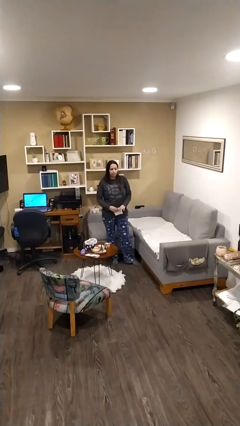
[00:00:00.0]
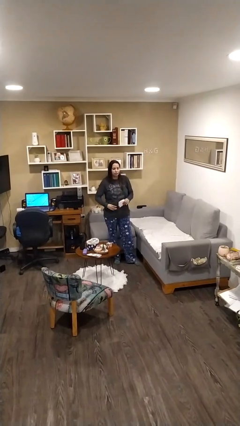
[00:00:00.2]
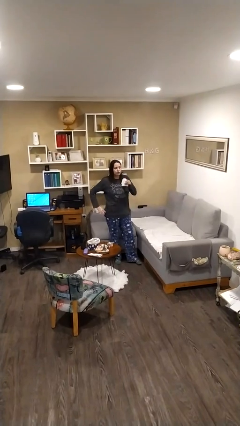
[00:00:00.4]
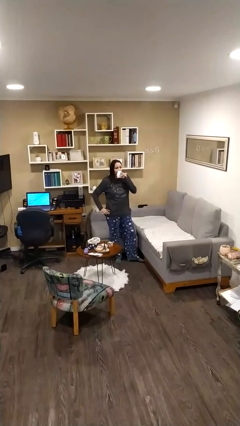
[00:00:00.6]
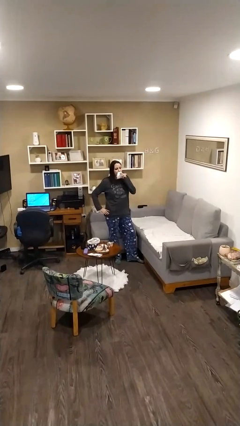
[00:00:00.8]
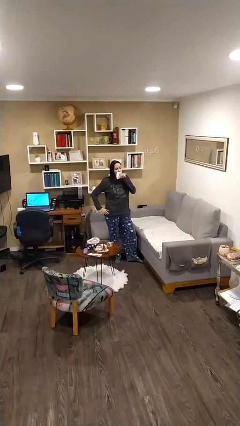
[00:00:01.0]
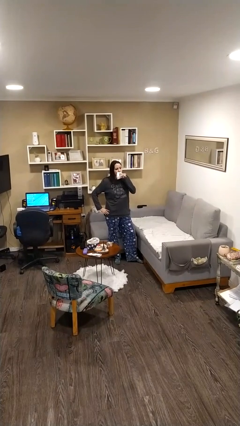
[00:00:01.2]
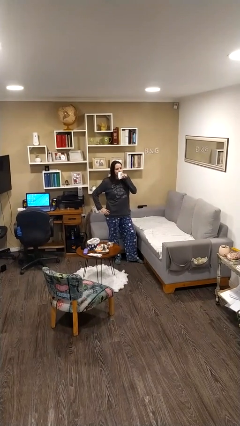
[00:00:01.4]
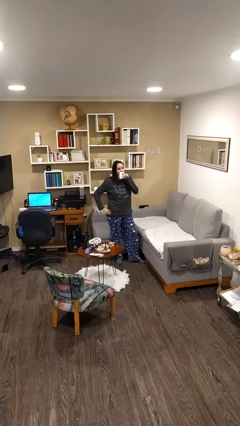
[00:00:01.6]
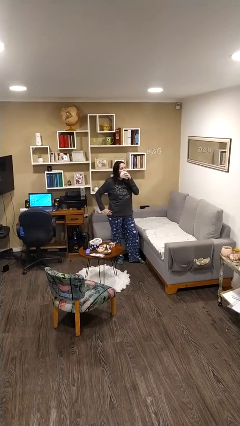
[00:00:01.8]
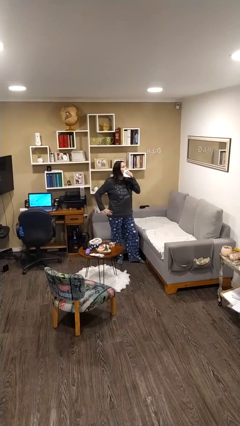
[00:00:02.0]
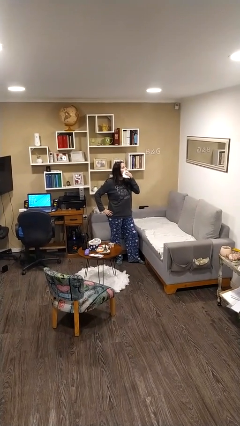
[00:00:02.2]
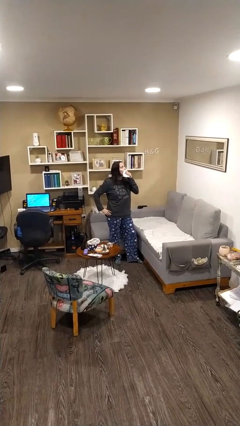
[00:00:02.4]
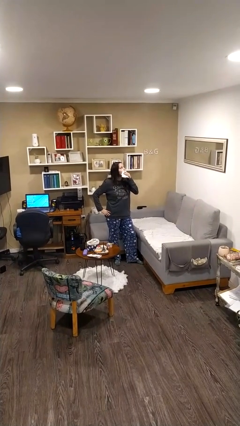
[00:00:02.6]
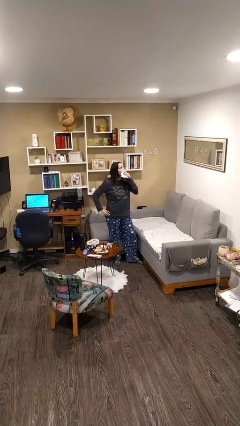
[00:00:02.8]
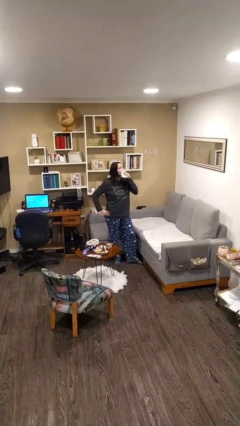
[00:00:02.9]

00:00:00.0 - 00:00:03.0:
person wipes mouth with napkin

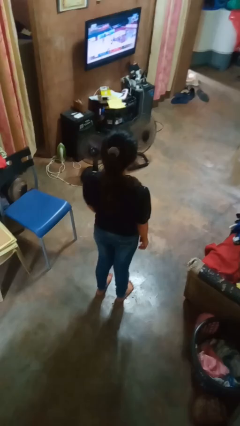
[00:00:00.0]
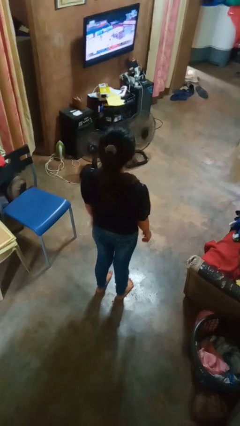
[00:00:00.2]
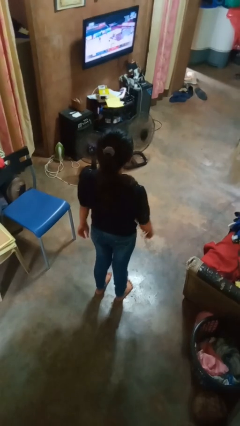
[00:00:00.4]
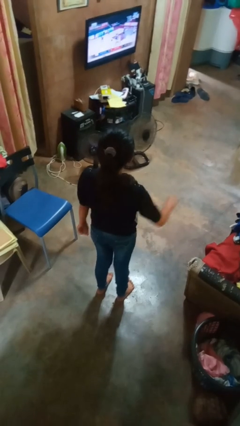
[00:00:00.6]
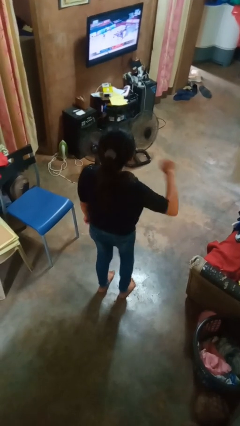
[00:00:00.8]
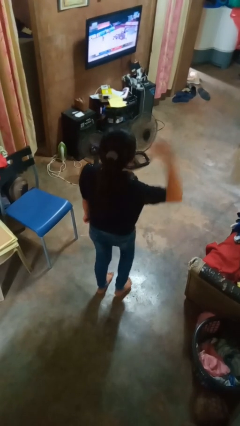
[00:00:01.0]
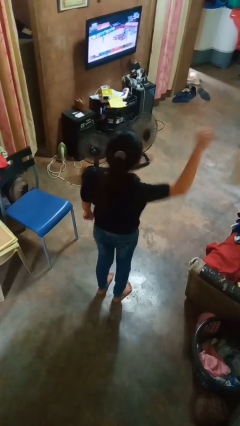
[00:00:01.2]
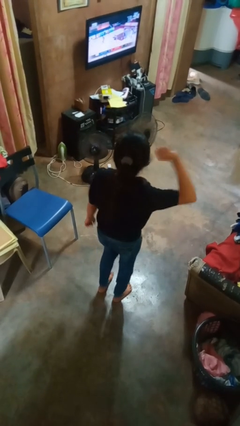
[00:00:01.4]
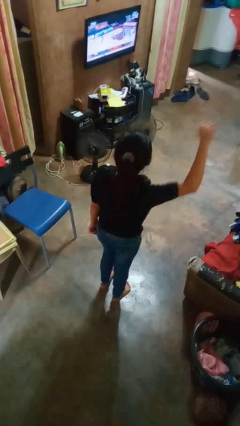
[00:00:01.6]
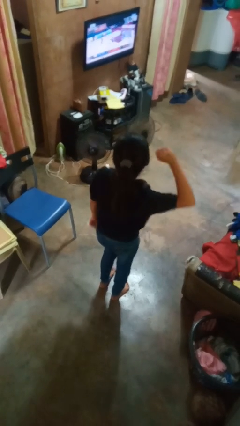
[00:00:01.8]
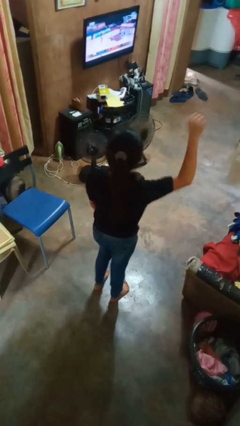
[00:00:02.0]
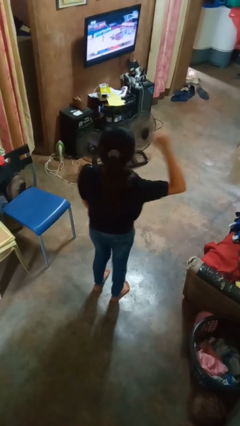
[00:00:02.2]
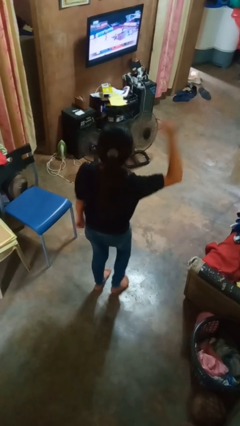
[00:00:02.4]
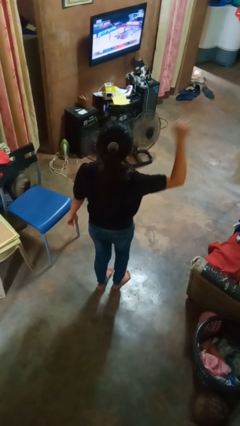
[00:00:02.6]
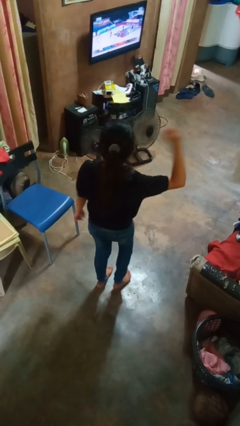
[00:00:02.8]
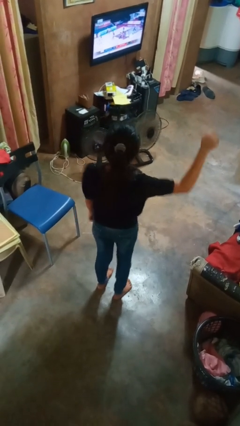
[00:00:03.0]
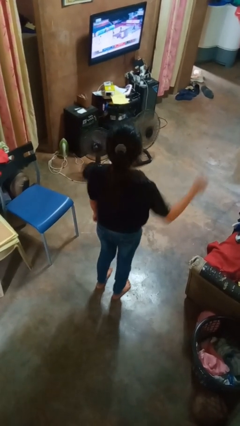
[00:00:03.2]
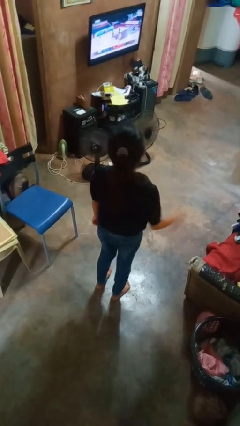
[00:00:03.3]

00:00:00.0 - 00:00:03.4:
person dances in place

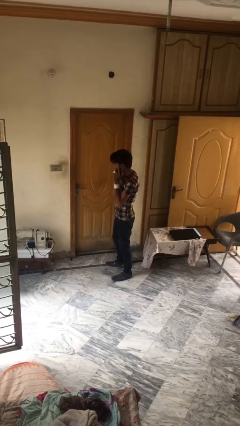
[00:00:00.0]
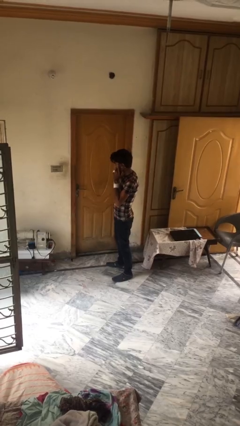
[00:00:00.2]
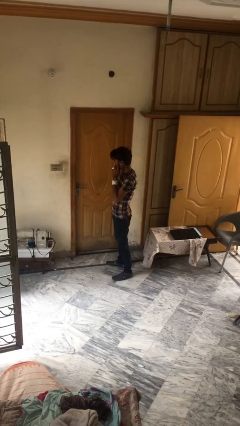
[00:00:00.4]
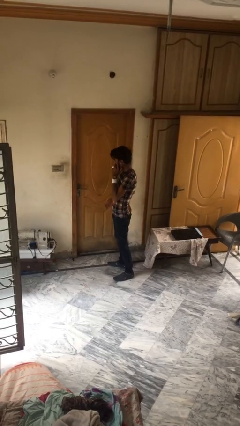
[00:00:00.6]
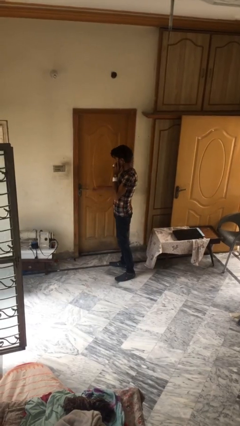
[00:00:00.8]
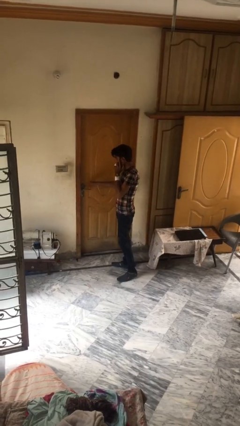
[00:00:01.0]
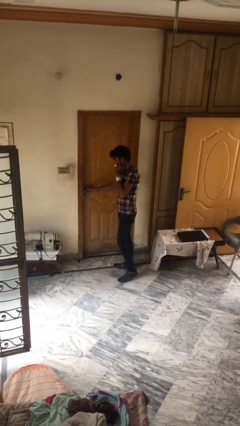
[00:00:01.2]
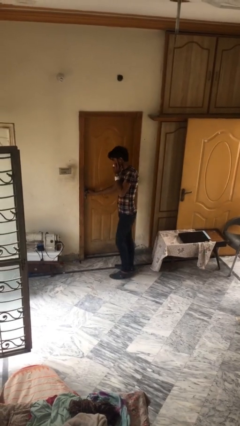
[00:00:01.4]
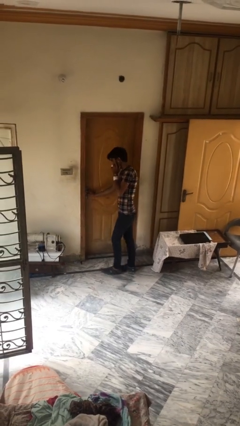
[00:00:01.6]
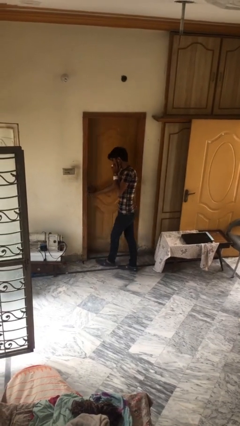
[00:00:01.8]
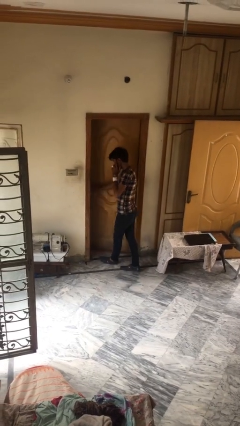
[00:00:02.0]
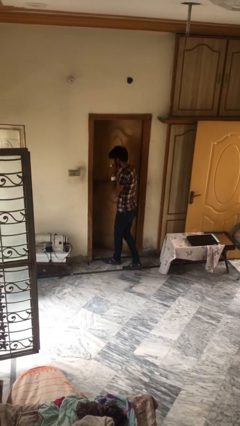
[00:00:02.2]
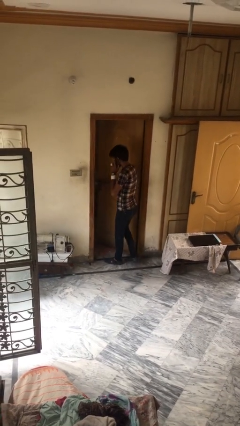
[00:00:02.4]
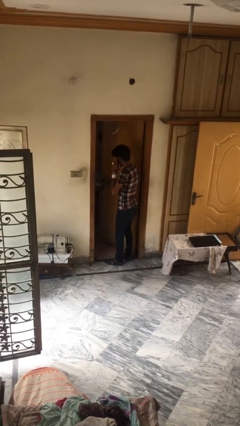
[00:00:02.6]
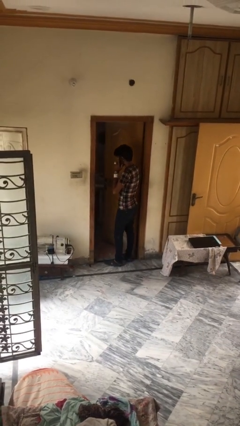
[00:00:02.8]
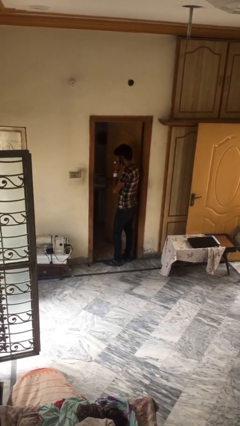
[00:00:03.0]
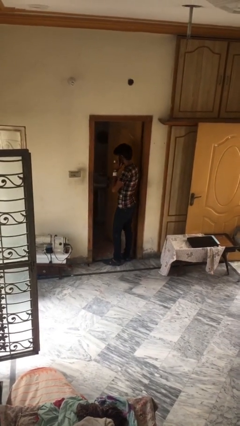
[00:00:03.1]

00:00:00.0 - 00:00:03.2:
person opens facility door

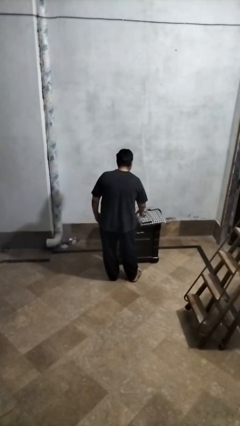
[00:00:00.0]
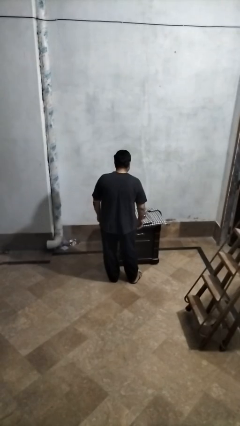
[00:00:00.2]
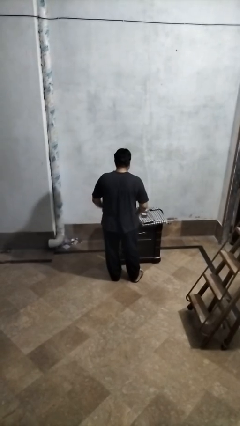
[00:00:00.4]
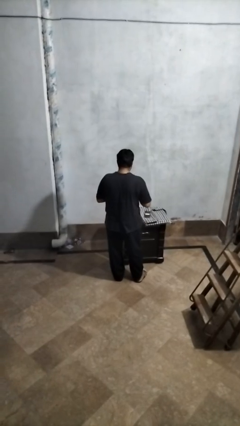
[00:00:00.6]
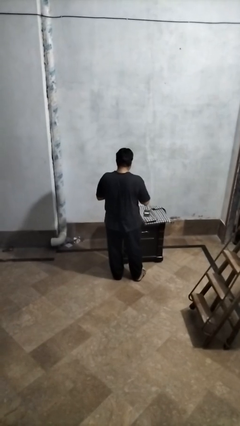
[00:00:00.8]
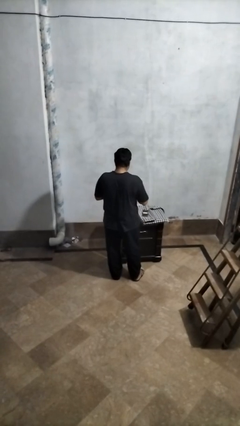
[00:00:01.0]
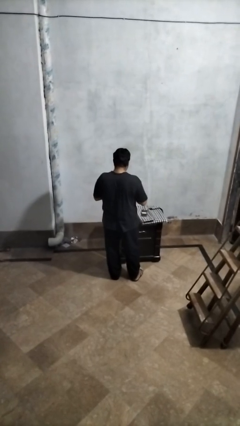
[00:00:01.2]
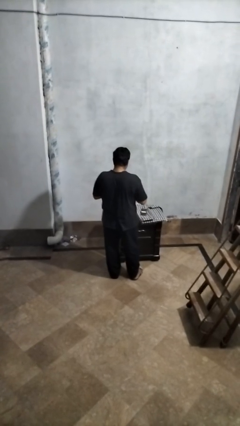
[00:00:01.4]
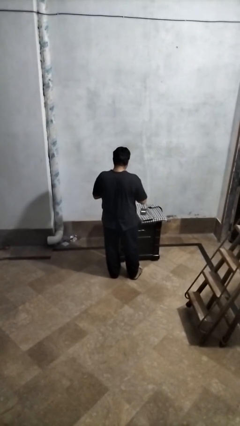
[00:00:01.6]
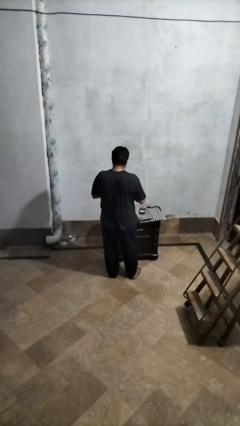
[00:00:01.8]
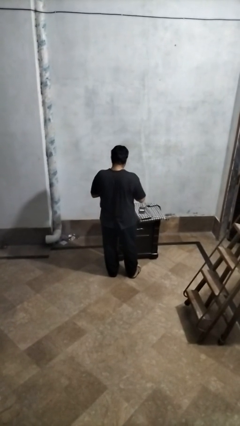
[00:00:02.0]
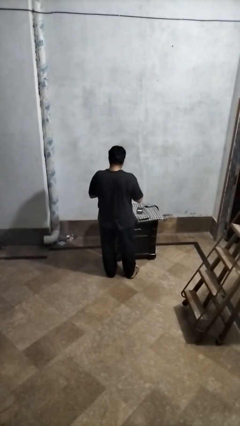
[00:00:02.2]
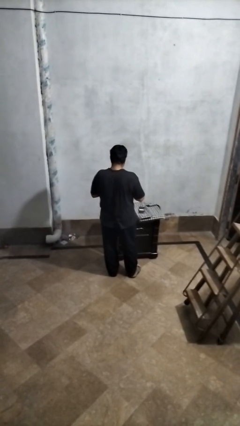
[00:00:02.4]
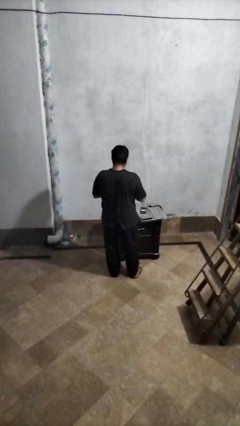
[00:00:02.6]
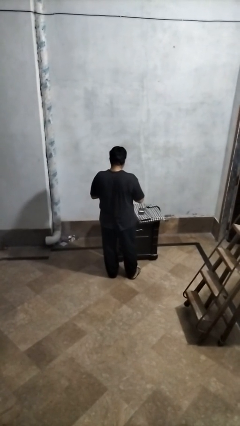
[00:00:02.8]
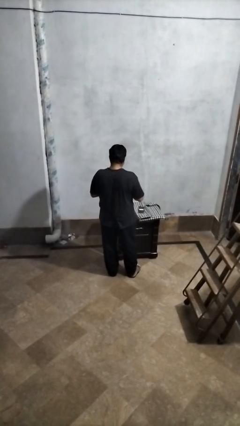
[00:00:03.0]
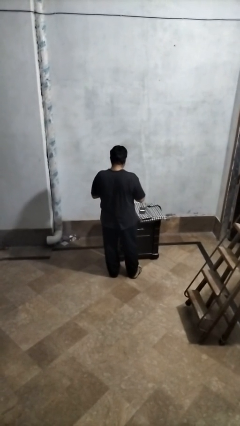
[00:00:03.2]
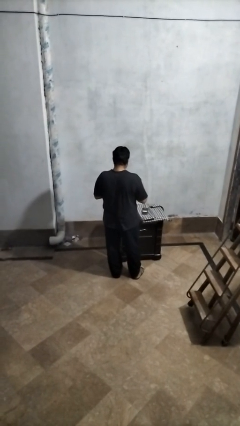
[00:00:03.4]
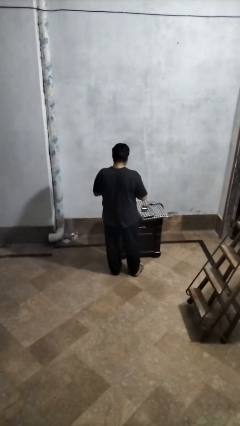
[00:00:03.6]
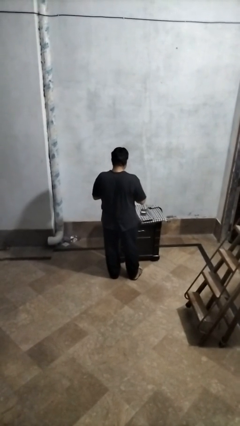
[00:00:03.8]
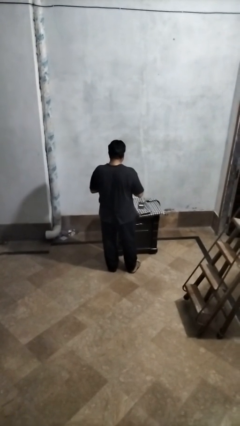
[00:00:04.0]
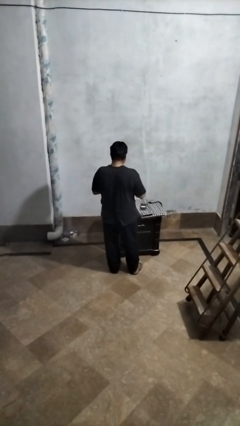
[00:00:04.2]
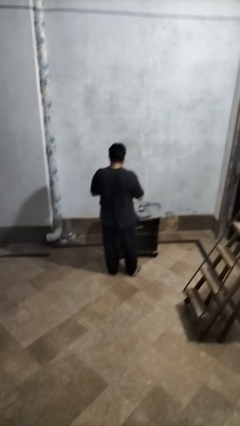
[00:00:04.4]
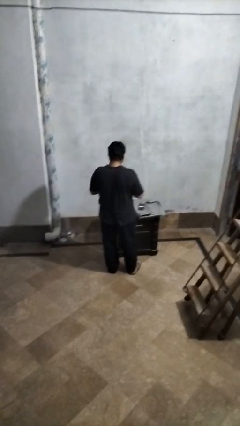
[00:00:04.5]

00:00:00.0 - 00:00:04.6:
person clips fingernails

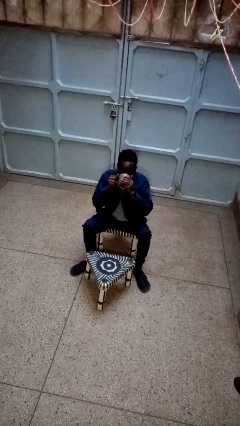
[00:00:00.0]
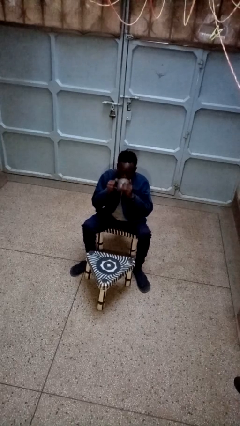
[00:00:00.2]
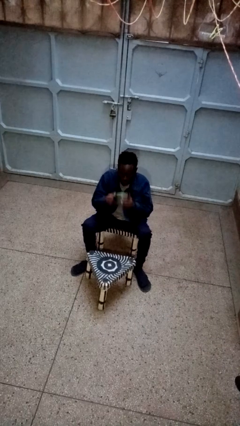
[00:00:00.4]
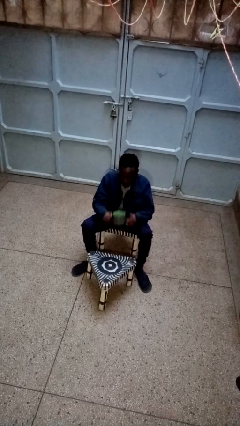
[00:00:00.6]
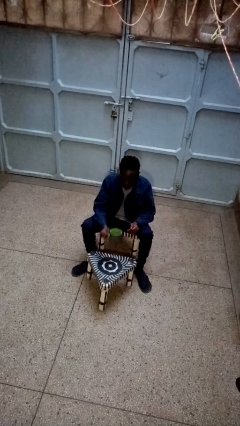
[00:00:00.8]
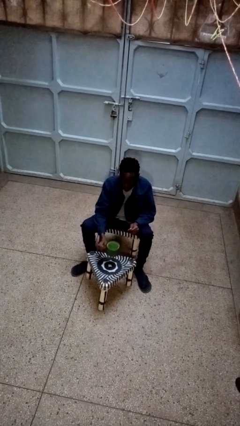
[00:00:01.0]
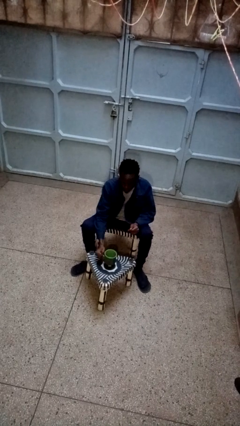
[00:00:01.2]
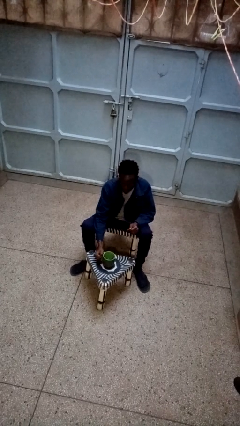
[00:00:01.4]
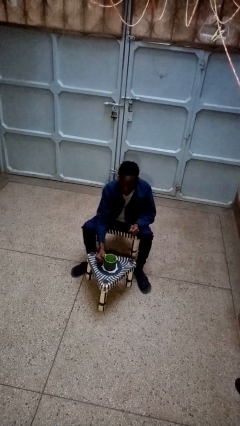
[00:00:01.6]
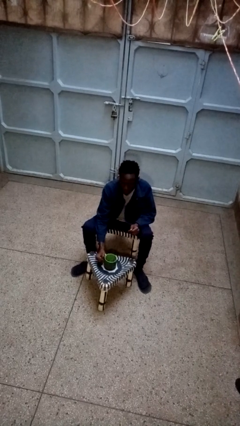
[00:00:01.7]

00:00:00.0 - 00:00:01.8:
person puts down object on table

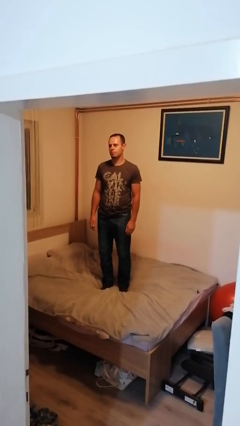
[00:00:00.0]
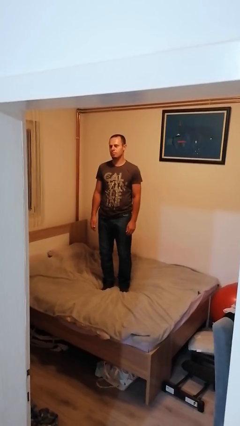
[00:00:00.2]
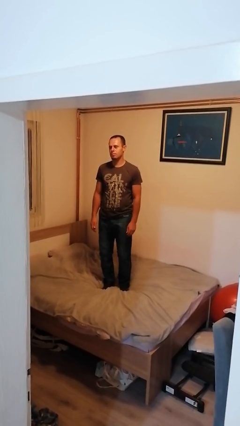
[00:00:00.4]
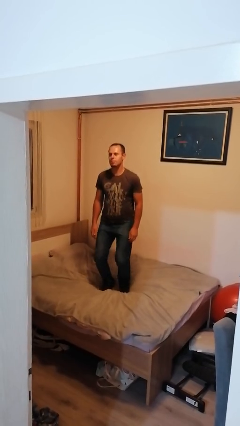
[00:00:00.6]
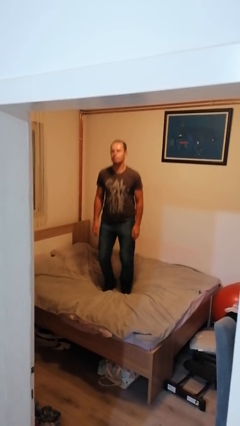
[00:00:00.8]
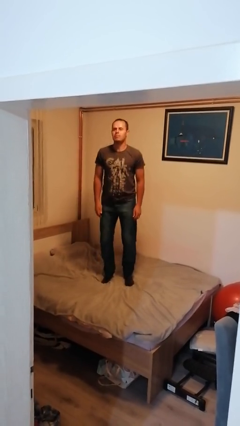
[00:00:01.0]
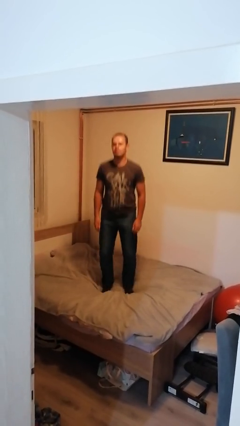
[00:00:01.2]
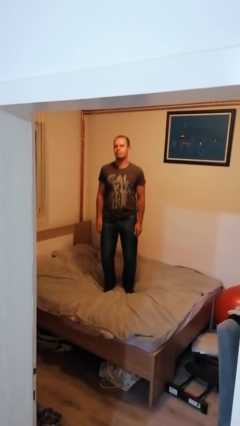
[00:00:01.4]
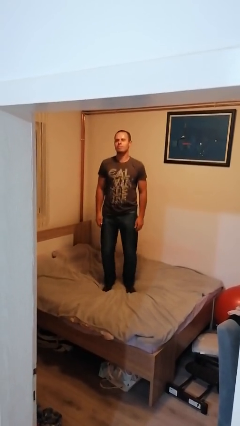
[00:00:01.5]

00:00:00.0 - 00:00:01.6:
person jumps on bed
